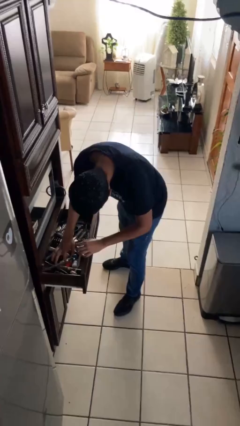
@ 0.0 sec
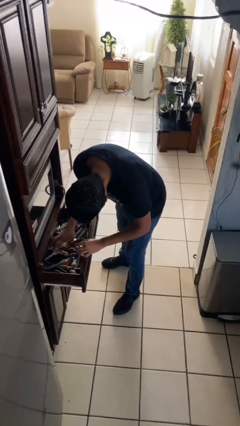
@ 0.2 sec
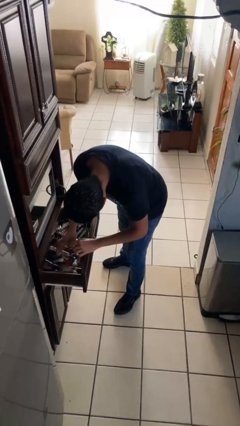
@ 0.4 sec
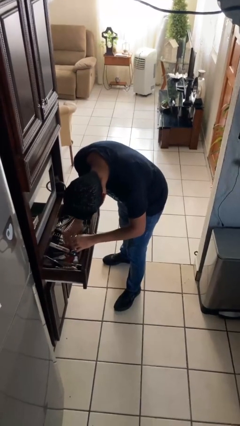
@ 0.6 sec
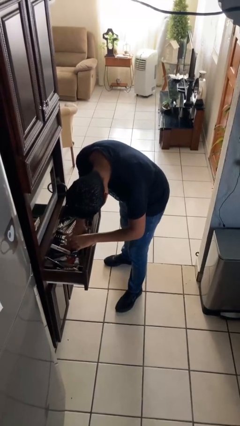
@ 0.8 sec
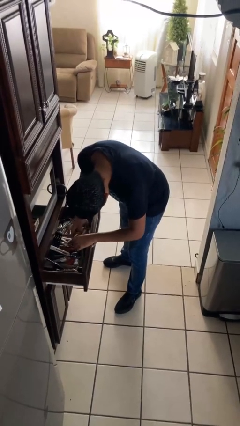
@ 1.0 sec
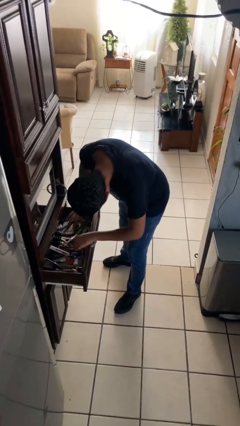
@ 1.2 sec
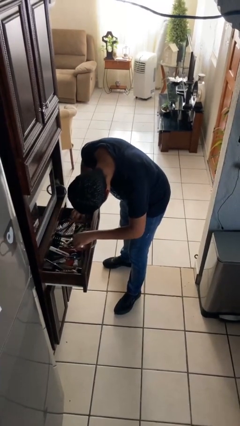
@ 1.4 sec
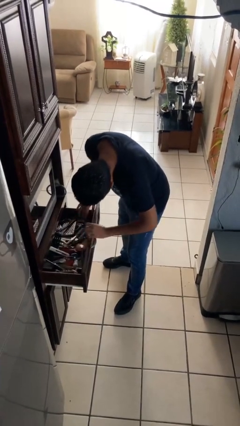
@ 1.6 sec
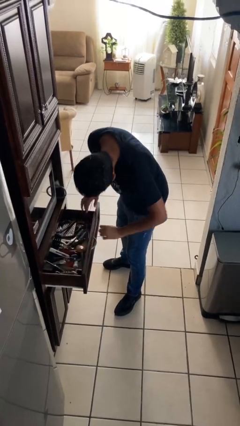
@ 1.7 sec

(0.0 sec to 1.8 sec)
person searches in kitchen drawer

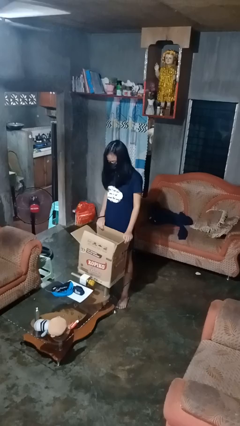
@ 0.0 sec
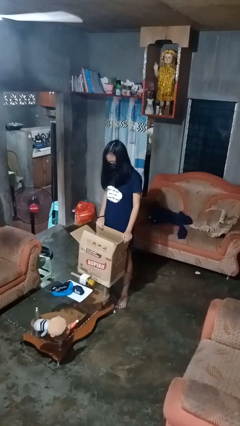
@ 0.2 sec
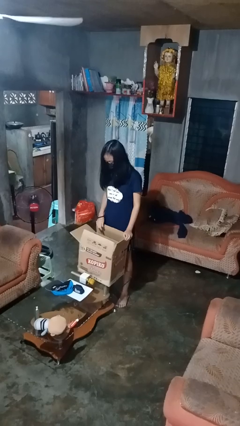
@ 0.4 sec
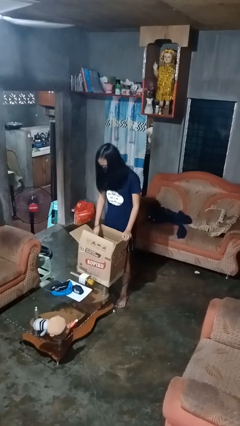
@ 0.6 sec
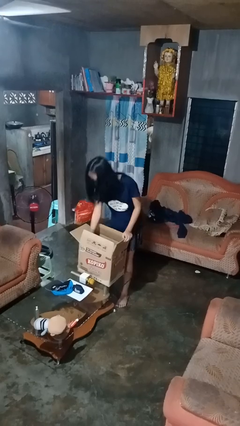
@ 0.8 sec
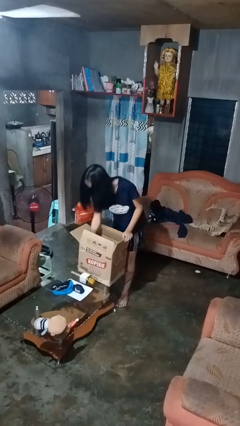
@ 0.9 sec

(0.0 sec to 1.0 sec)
person searches in box

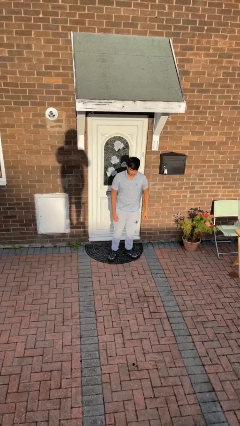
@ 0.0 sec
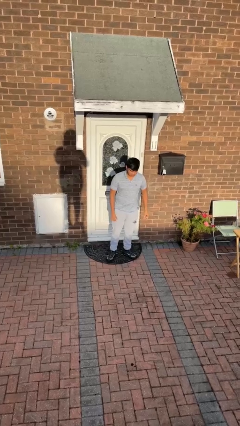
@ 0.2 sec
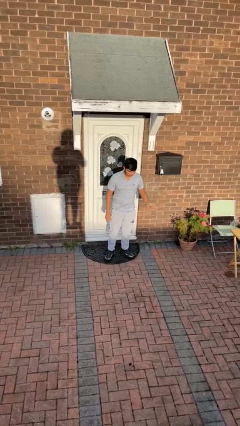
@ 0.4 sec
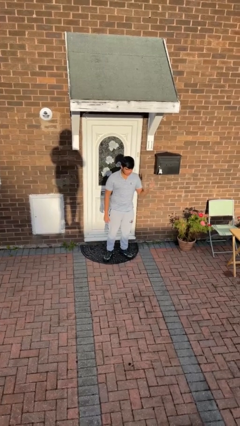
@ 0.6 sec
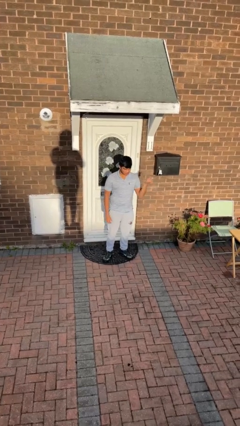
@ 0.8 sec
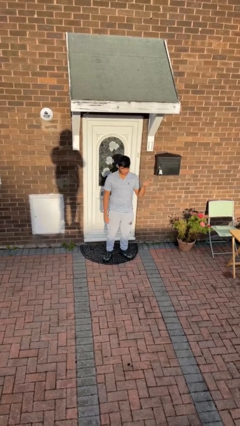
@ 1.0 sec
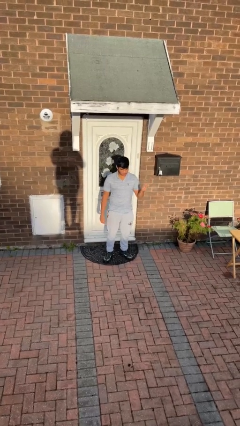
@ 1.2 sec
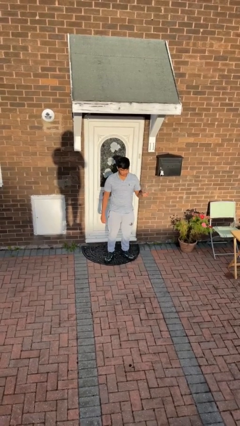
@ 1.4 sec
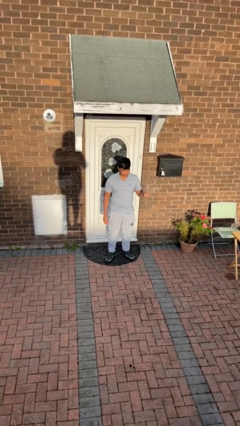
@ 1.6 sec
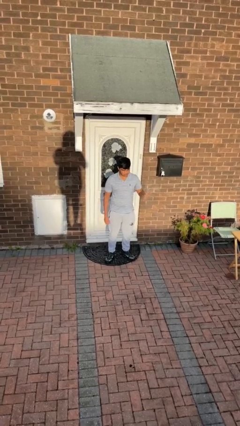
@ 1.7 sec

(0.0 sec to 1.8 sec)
person snaps fingers

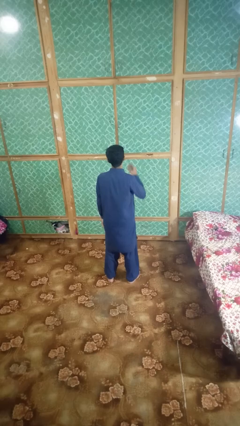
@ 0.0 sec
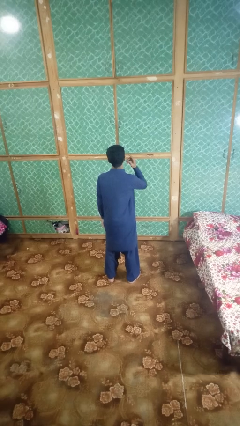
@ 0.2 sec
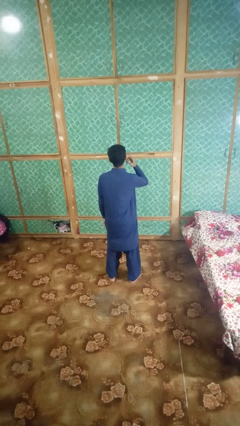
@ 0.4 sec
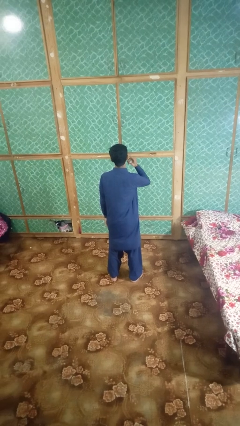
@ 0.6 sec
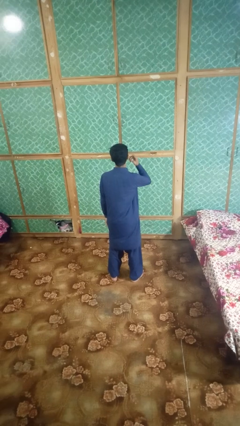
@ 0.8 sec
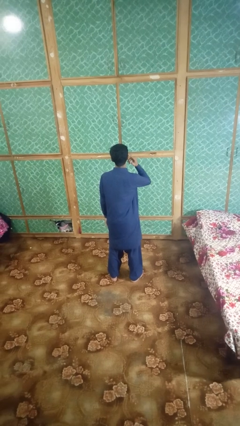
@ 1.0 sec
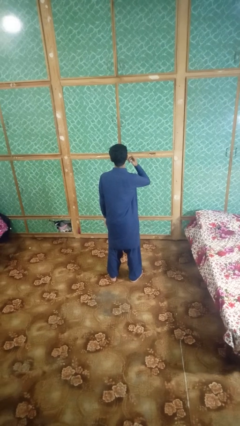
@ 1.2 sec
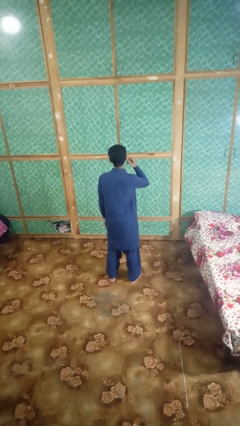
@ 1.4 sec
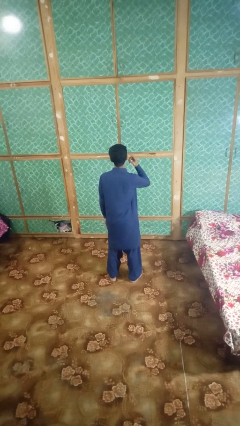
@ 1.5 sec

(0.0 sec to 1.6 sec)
person gestures listen closely

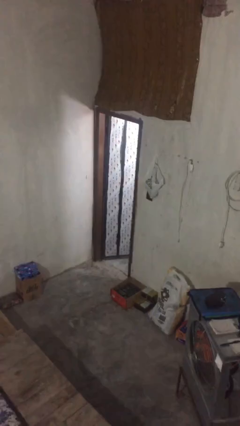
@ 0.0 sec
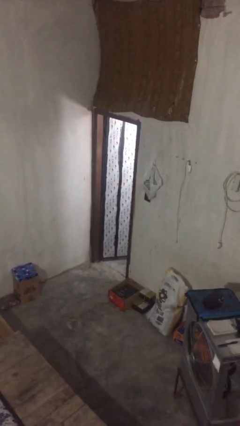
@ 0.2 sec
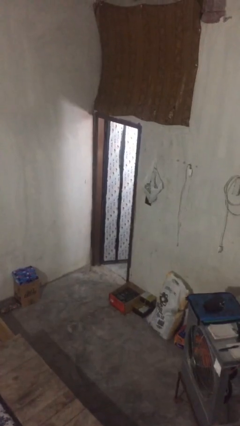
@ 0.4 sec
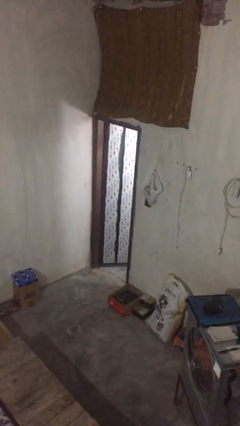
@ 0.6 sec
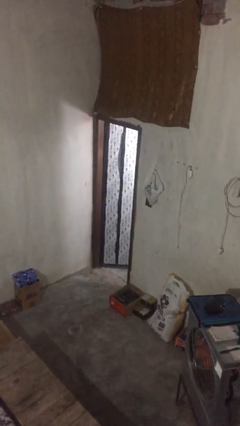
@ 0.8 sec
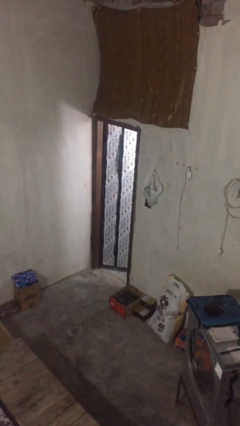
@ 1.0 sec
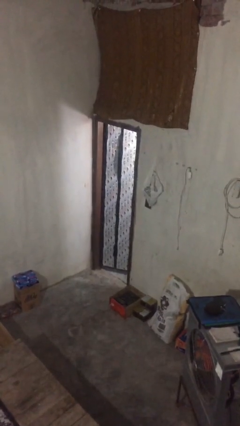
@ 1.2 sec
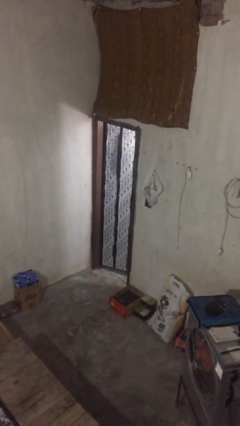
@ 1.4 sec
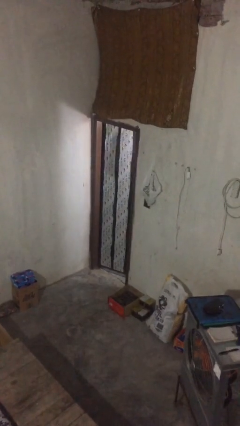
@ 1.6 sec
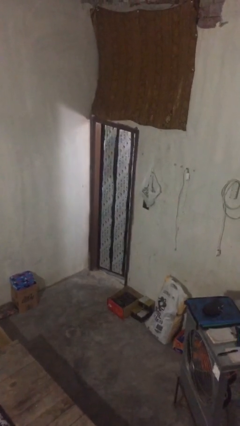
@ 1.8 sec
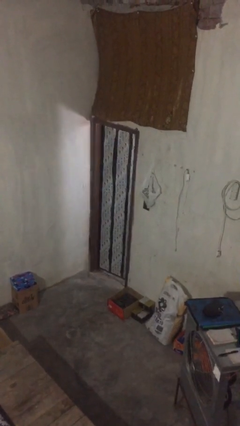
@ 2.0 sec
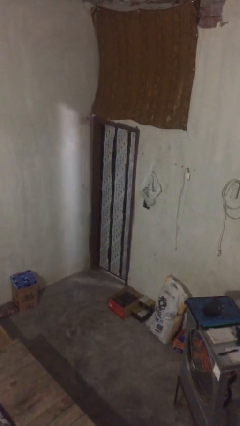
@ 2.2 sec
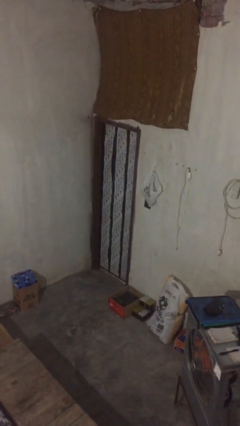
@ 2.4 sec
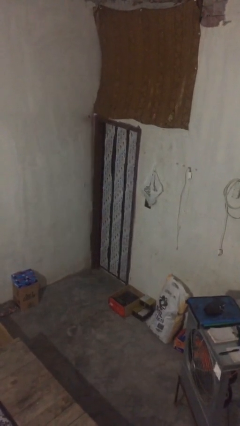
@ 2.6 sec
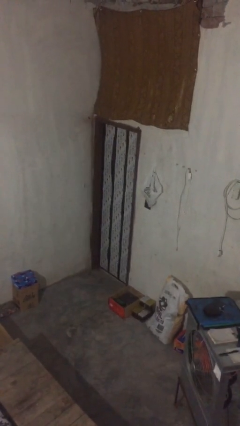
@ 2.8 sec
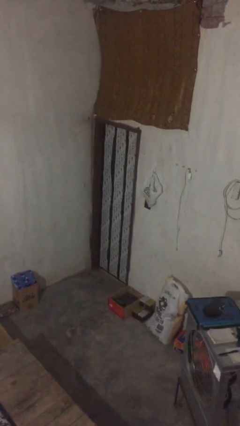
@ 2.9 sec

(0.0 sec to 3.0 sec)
person closes facility door

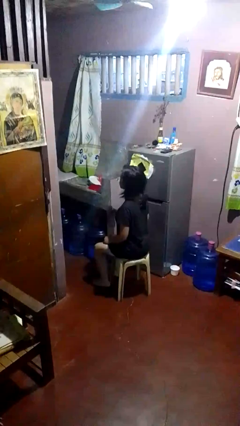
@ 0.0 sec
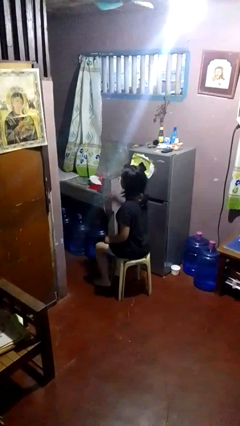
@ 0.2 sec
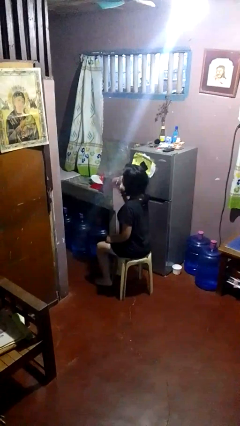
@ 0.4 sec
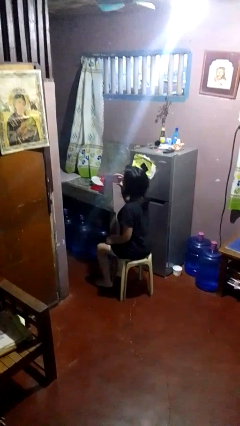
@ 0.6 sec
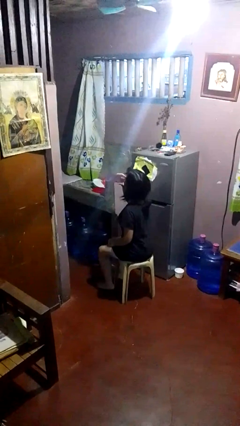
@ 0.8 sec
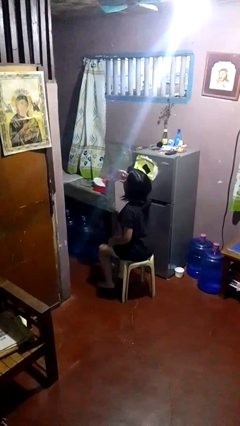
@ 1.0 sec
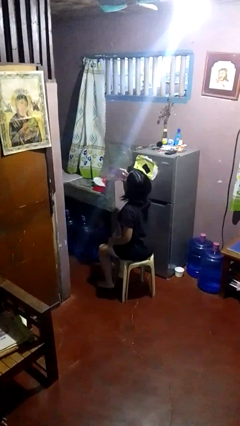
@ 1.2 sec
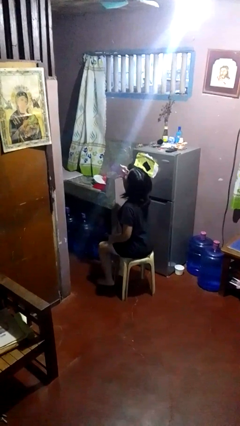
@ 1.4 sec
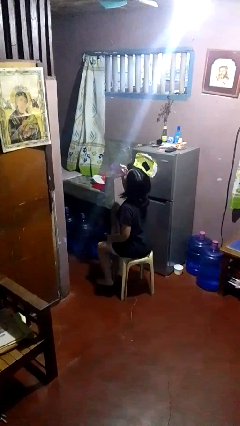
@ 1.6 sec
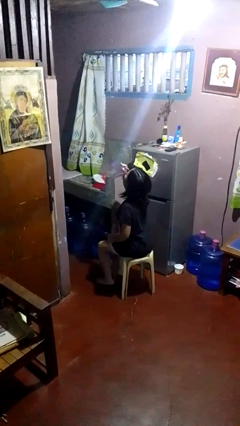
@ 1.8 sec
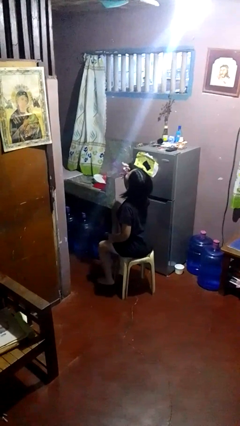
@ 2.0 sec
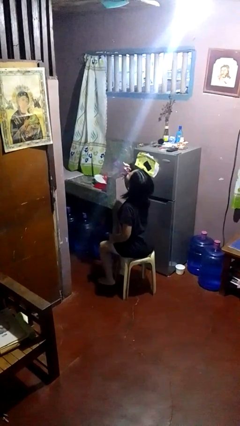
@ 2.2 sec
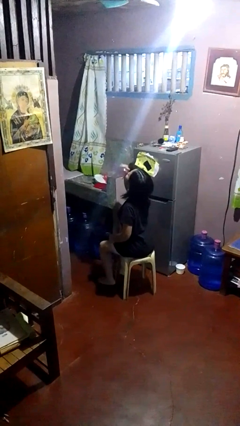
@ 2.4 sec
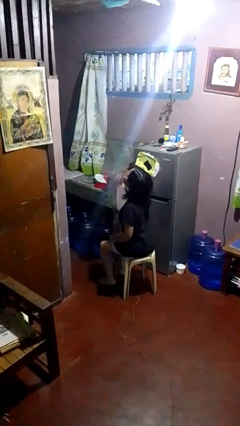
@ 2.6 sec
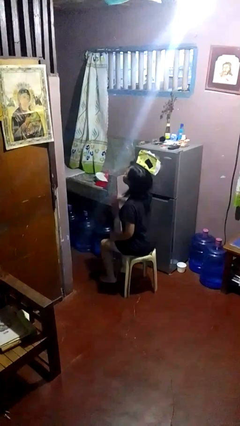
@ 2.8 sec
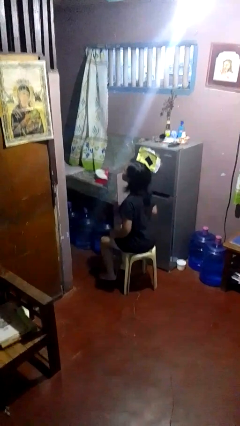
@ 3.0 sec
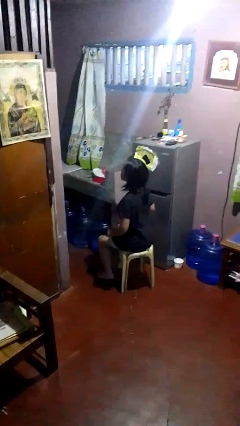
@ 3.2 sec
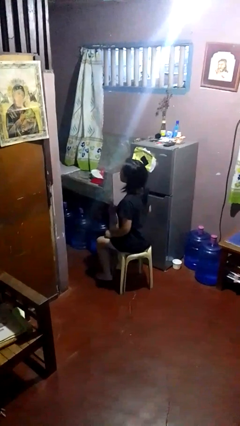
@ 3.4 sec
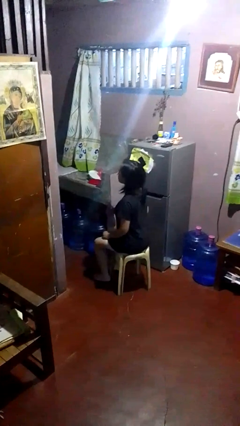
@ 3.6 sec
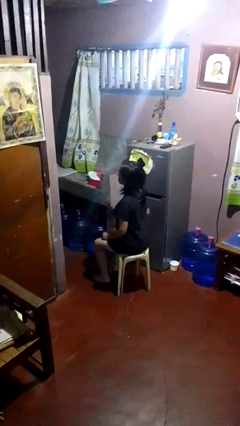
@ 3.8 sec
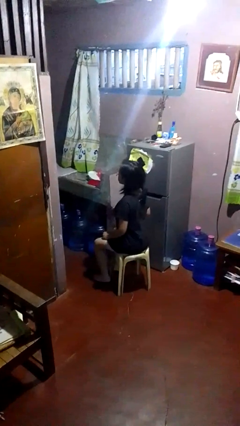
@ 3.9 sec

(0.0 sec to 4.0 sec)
person drinks from bottle

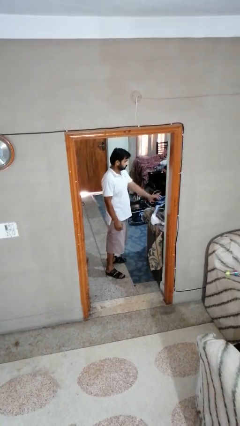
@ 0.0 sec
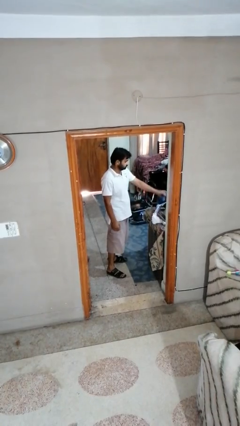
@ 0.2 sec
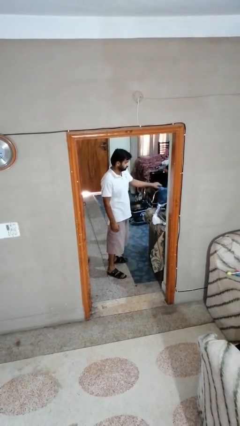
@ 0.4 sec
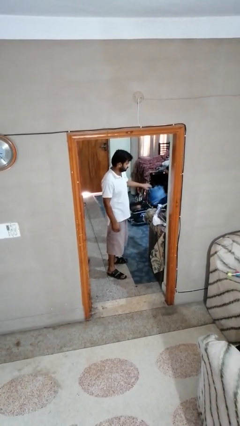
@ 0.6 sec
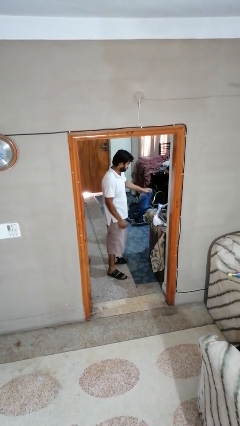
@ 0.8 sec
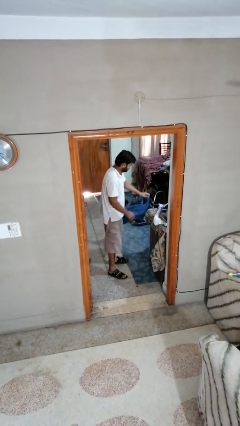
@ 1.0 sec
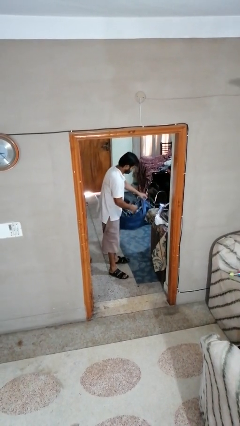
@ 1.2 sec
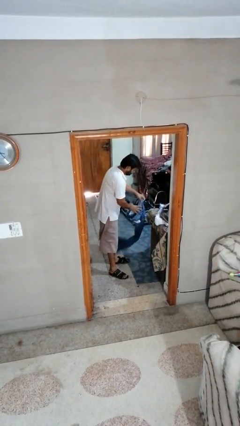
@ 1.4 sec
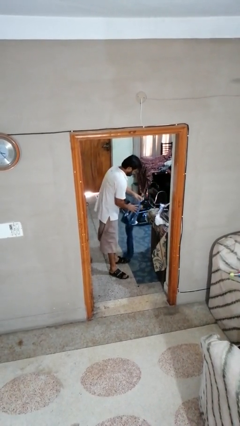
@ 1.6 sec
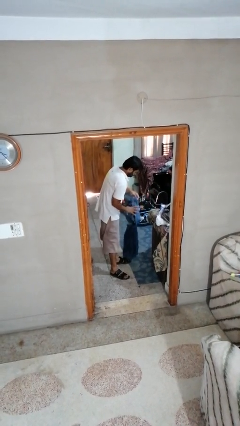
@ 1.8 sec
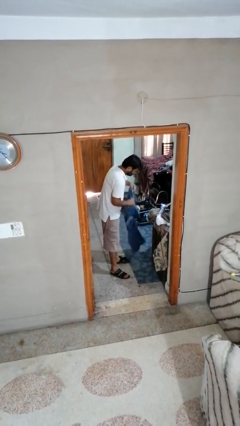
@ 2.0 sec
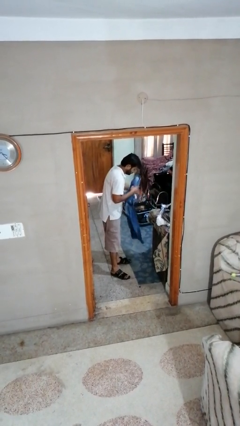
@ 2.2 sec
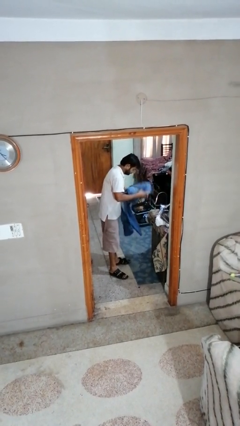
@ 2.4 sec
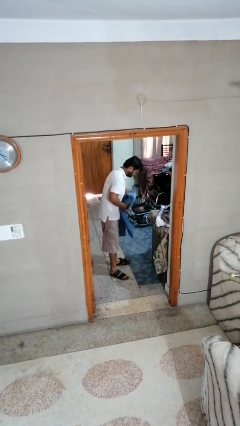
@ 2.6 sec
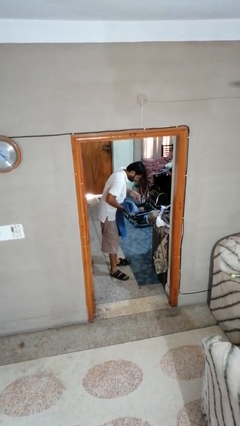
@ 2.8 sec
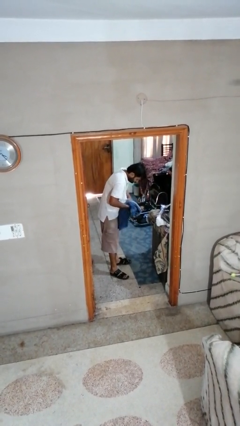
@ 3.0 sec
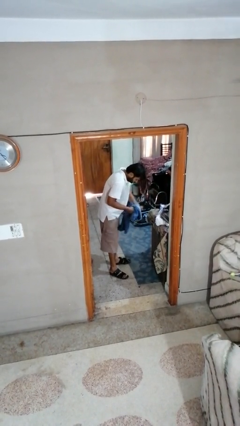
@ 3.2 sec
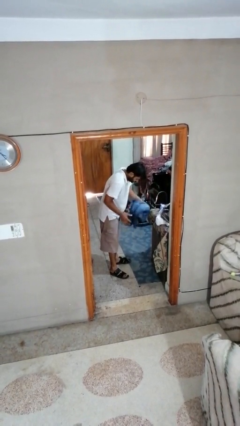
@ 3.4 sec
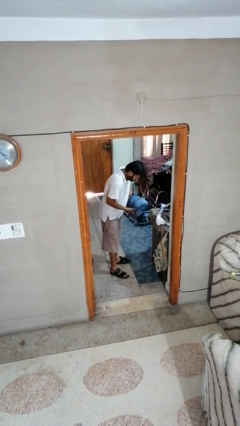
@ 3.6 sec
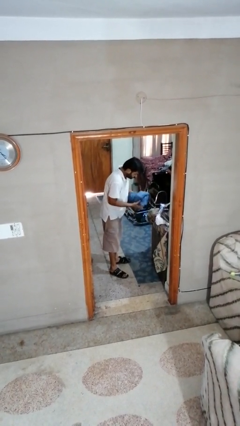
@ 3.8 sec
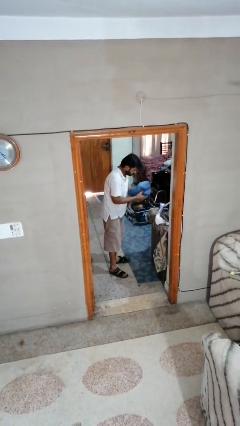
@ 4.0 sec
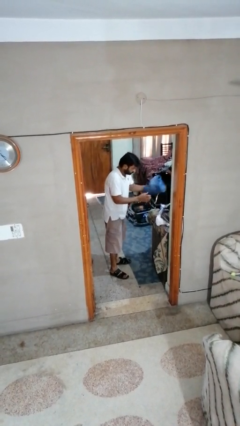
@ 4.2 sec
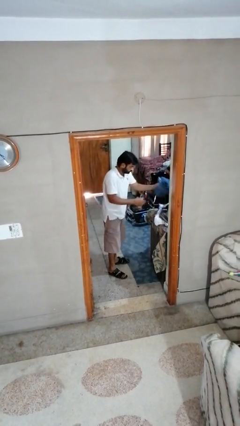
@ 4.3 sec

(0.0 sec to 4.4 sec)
person folds pants
